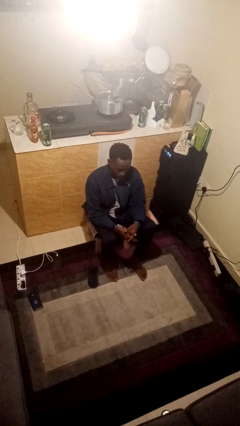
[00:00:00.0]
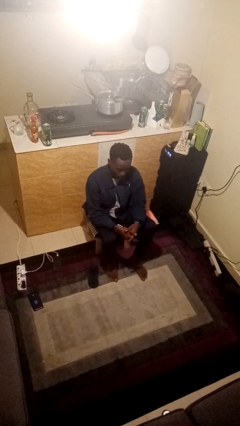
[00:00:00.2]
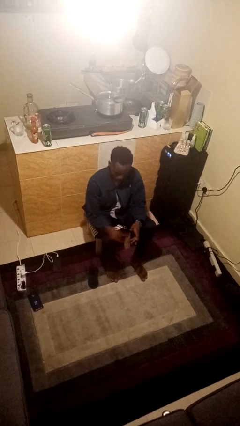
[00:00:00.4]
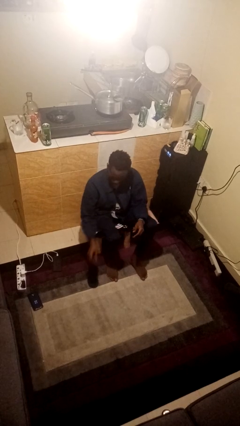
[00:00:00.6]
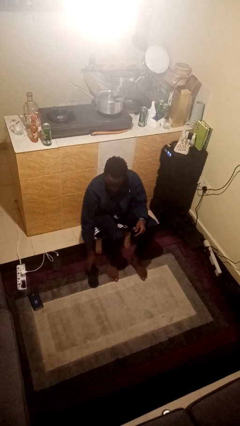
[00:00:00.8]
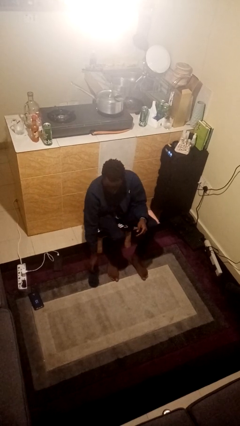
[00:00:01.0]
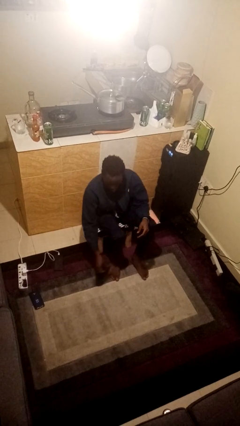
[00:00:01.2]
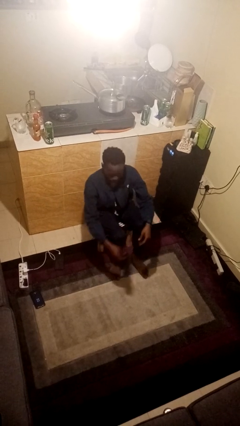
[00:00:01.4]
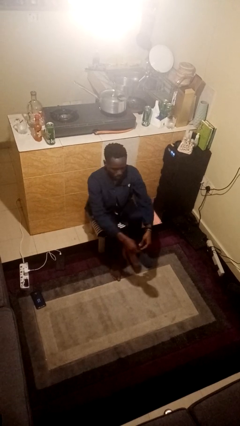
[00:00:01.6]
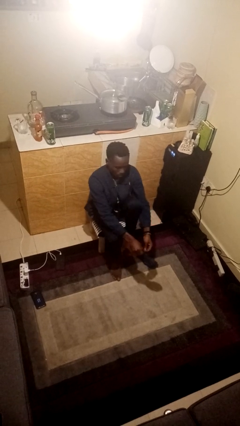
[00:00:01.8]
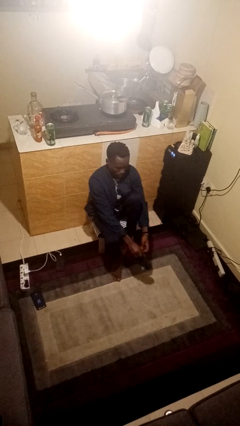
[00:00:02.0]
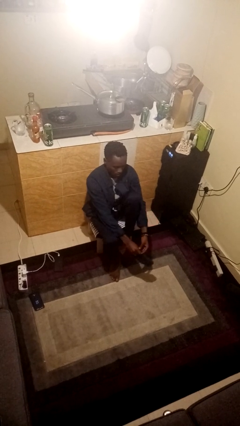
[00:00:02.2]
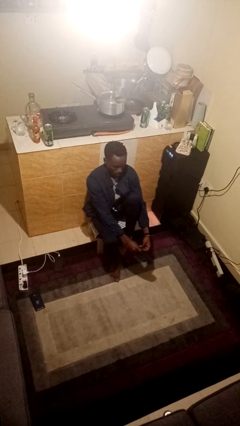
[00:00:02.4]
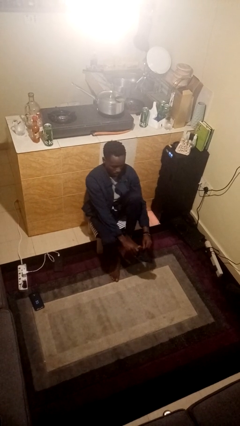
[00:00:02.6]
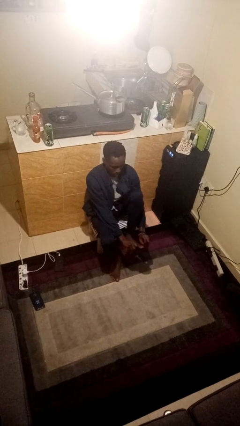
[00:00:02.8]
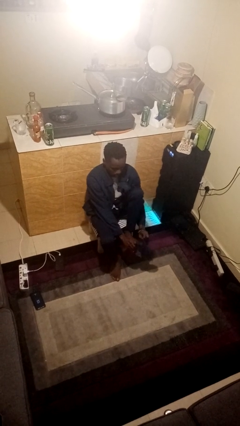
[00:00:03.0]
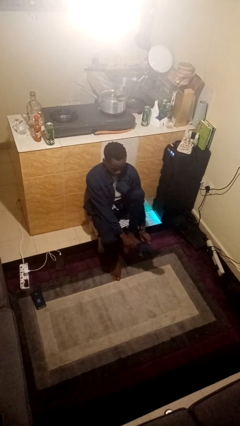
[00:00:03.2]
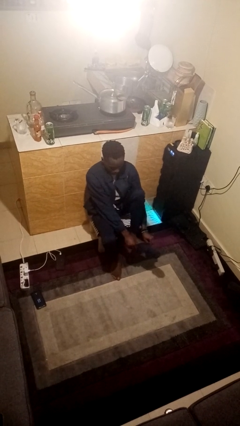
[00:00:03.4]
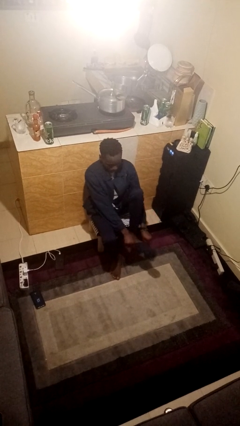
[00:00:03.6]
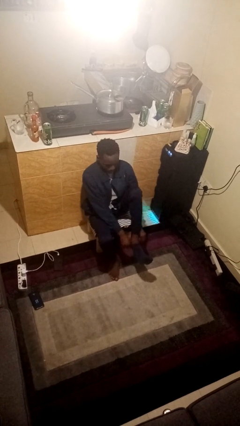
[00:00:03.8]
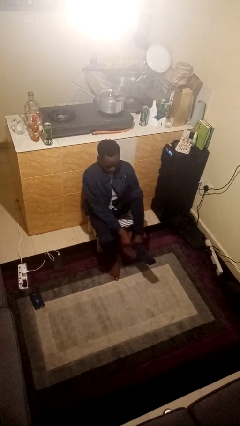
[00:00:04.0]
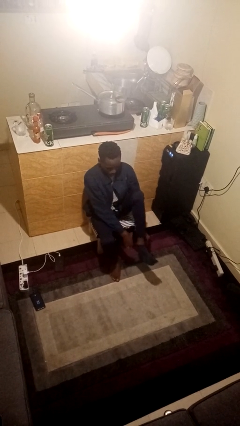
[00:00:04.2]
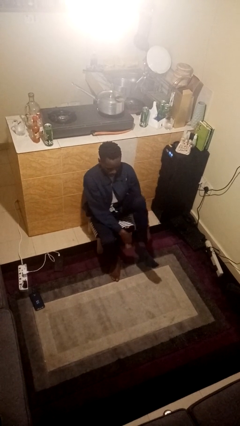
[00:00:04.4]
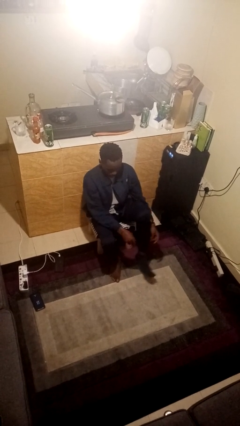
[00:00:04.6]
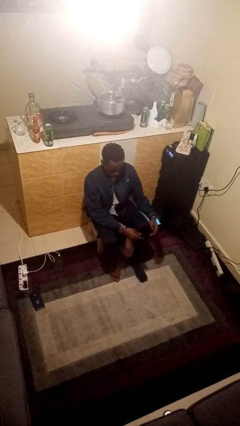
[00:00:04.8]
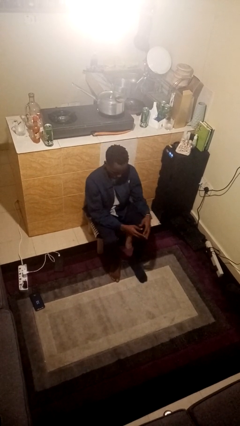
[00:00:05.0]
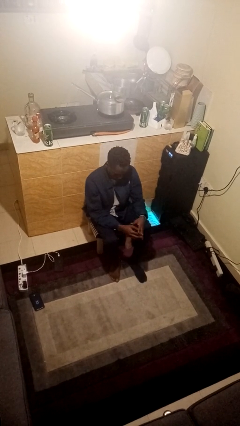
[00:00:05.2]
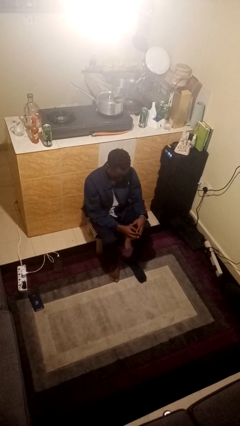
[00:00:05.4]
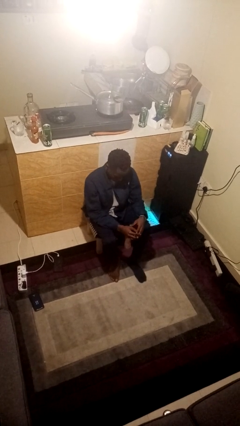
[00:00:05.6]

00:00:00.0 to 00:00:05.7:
person puts on socks

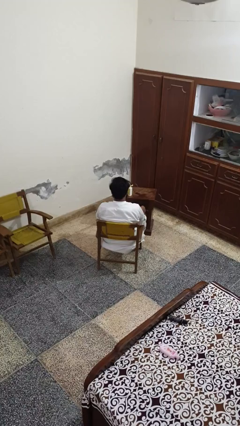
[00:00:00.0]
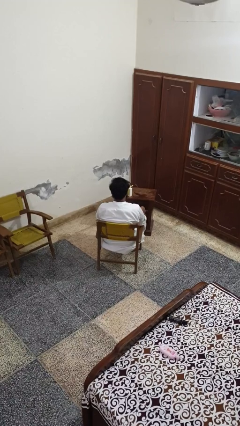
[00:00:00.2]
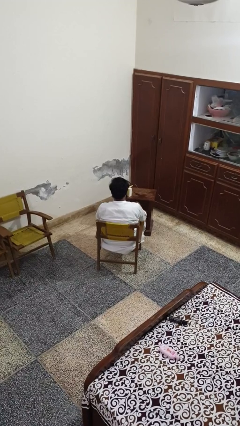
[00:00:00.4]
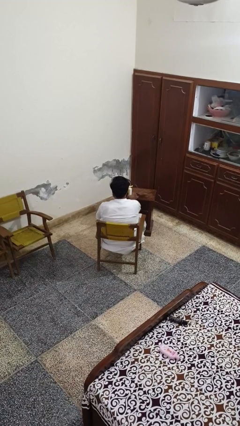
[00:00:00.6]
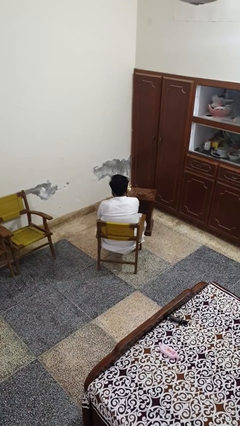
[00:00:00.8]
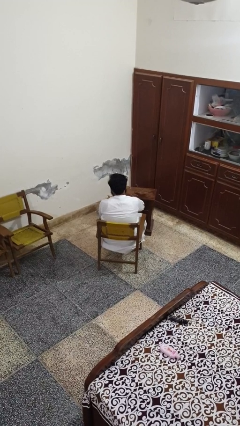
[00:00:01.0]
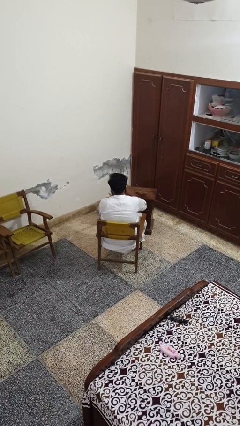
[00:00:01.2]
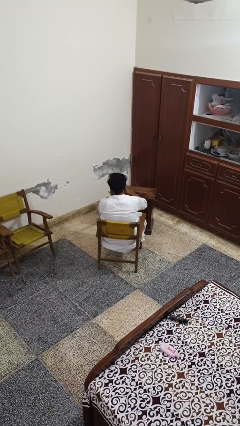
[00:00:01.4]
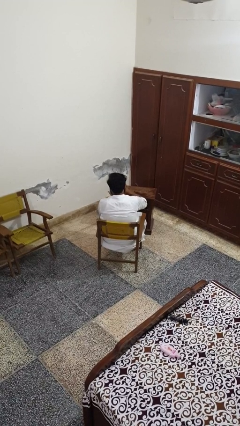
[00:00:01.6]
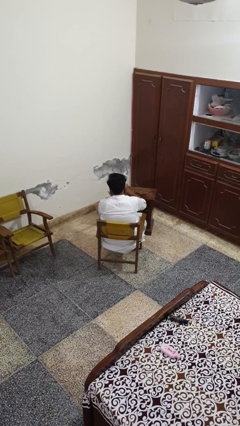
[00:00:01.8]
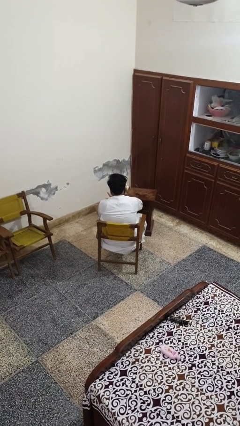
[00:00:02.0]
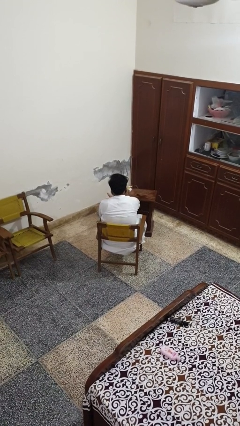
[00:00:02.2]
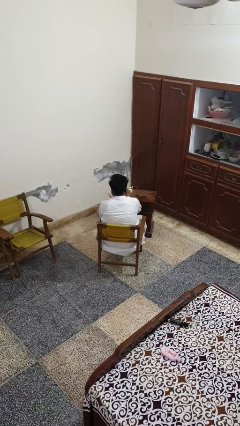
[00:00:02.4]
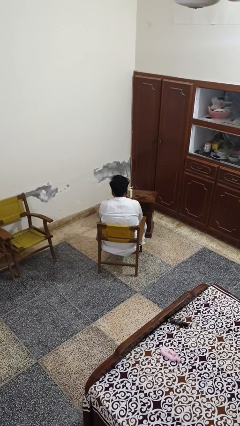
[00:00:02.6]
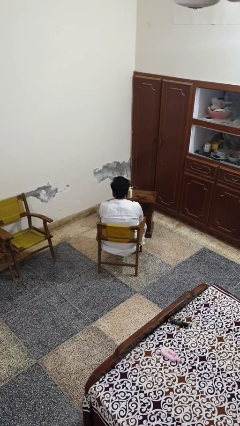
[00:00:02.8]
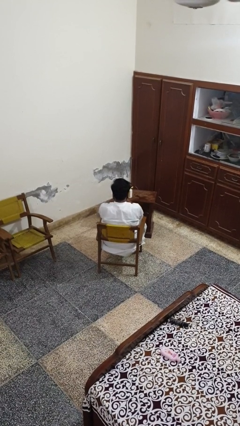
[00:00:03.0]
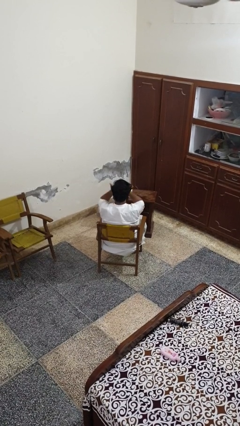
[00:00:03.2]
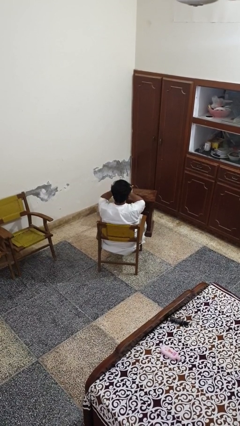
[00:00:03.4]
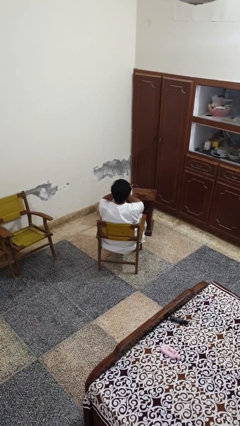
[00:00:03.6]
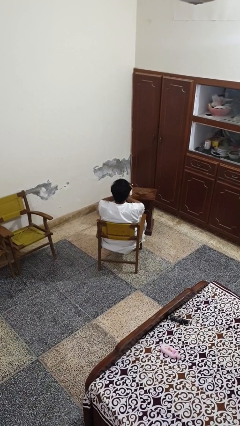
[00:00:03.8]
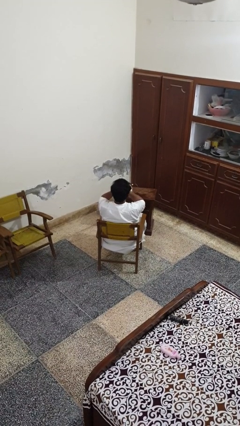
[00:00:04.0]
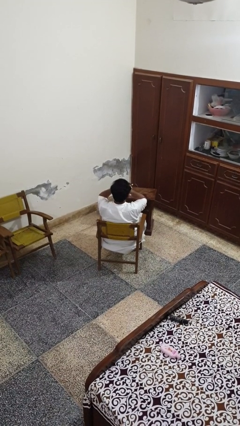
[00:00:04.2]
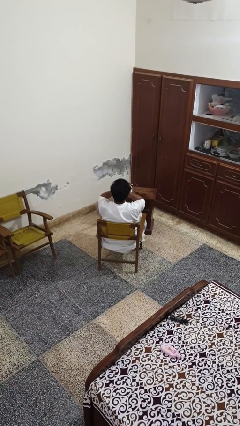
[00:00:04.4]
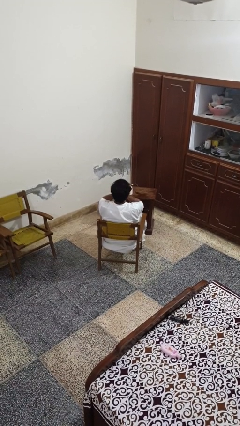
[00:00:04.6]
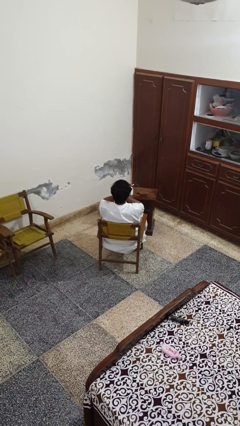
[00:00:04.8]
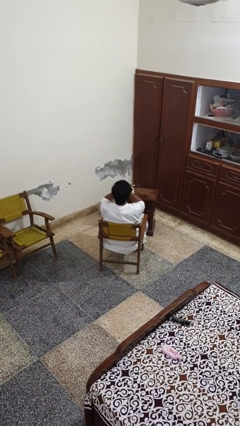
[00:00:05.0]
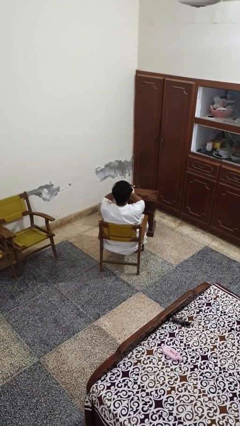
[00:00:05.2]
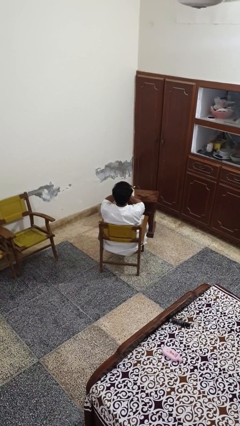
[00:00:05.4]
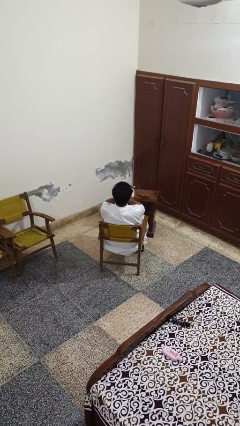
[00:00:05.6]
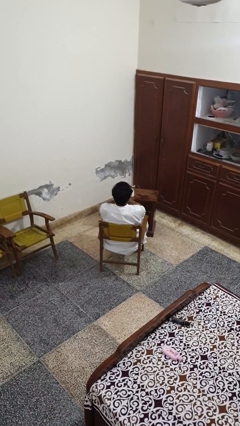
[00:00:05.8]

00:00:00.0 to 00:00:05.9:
person applies sunscreen

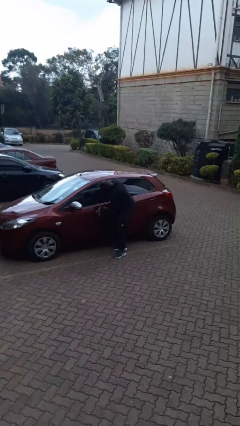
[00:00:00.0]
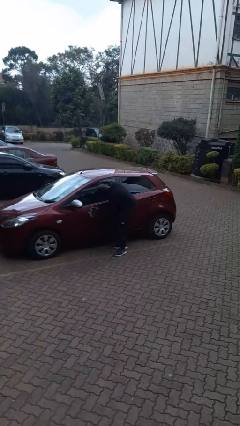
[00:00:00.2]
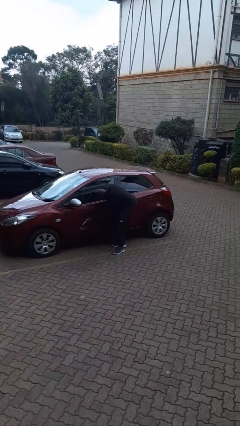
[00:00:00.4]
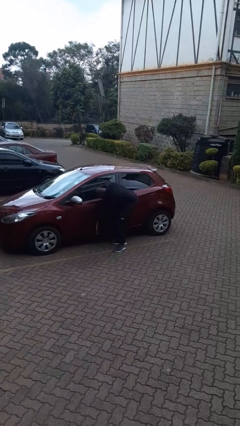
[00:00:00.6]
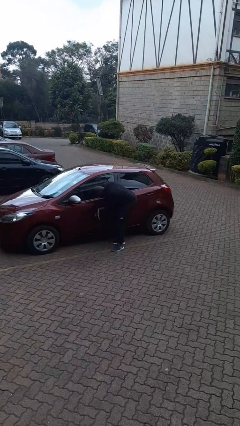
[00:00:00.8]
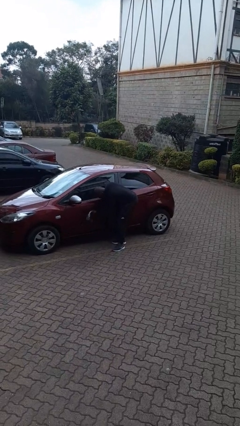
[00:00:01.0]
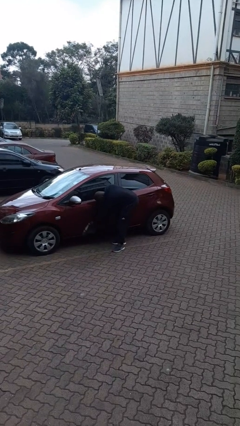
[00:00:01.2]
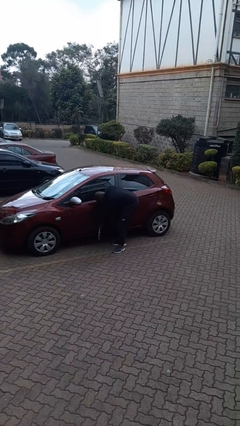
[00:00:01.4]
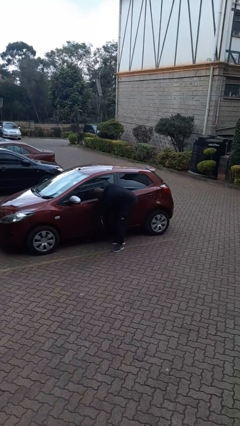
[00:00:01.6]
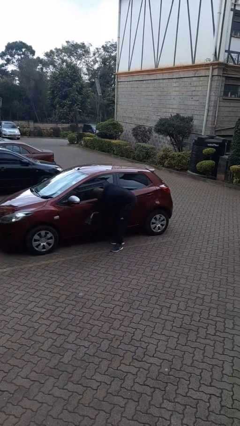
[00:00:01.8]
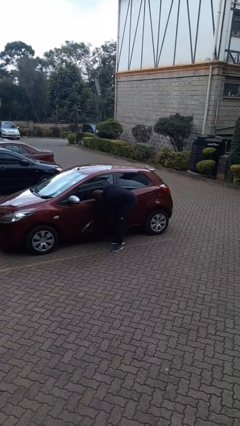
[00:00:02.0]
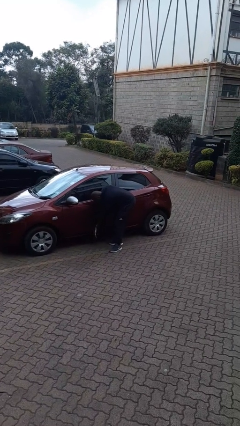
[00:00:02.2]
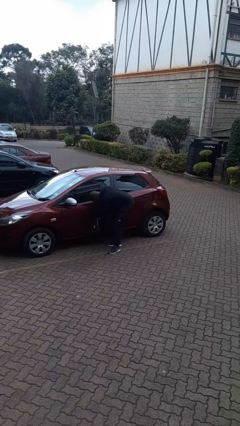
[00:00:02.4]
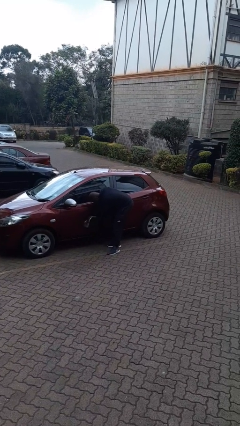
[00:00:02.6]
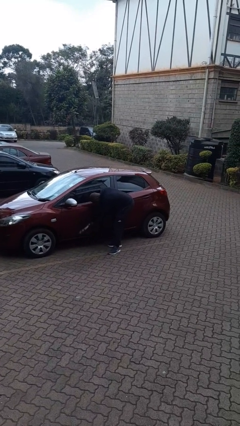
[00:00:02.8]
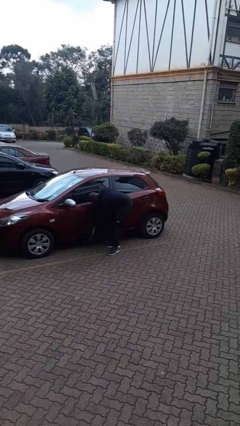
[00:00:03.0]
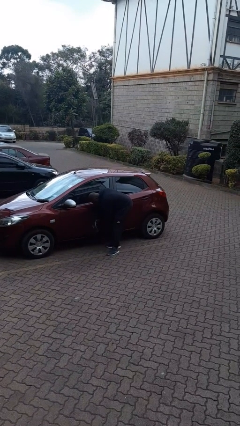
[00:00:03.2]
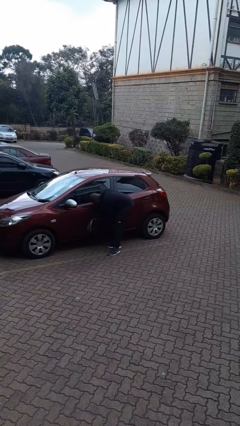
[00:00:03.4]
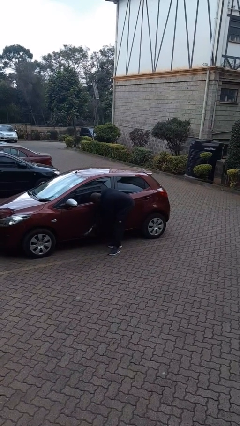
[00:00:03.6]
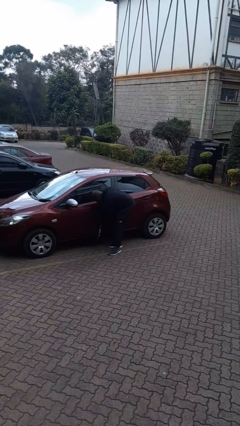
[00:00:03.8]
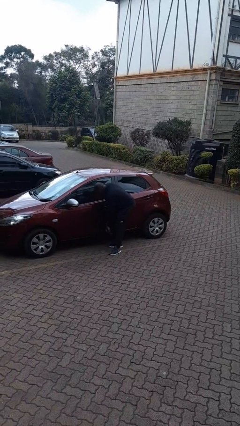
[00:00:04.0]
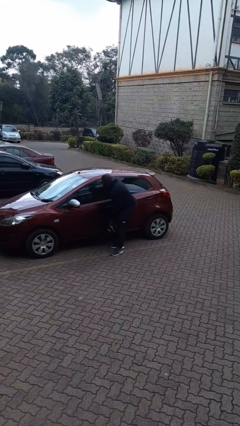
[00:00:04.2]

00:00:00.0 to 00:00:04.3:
person polishes car with rag

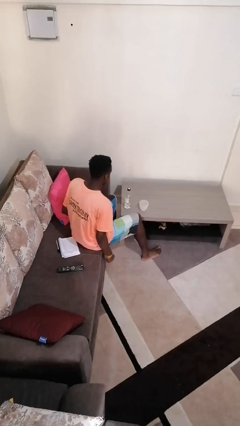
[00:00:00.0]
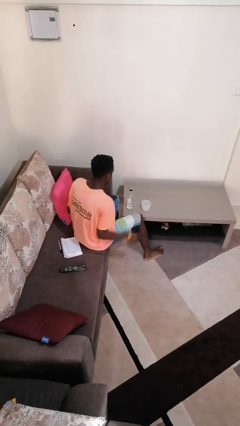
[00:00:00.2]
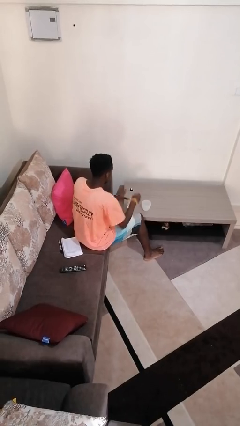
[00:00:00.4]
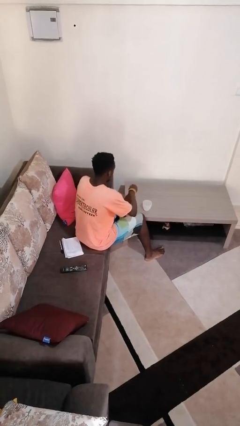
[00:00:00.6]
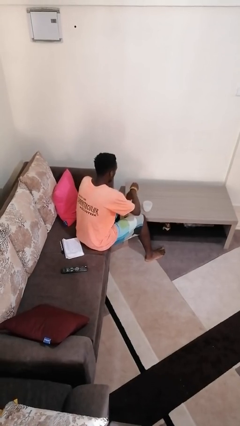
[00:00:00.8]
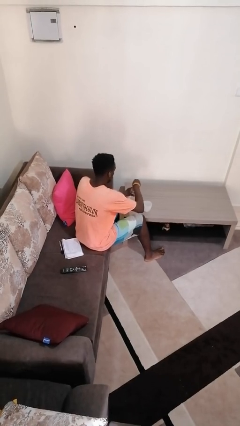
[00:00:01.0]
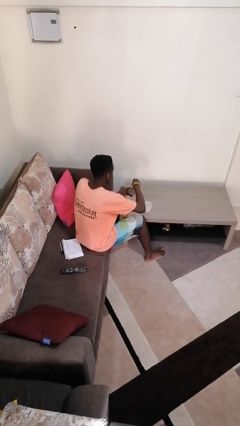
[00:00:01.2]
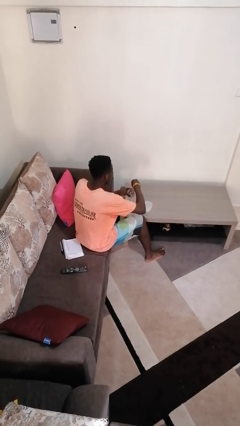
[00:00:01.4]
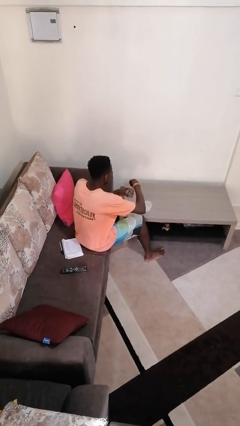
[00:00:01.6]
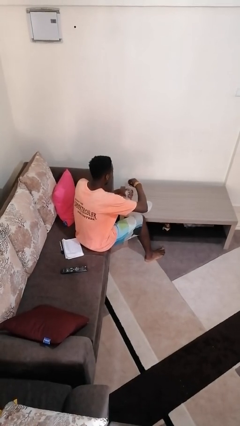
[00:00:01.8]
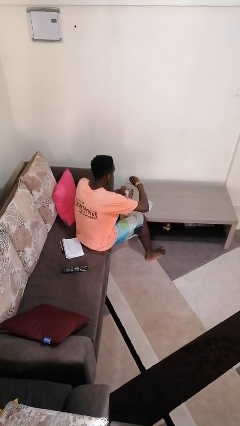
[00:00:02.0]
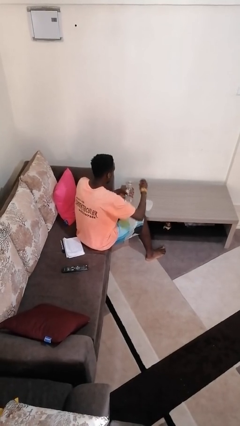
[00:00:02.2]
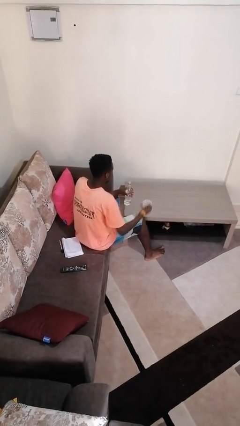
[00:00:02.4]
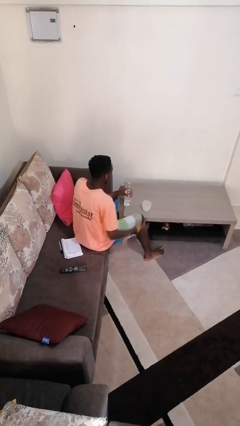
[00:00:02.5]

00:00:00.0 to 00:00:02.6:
person unscrews lid from bottle
